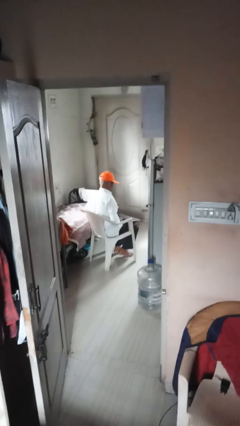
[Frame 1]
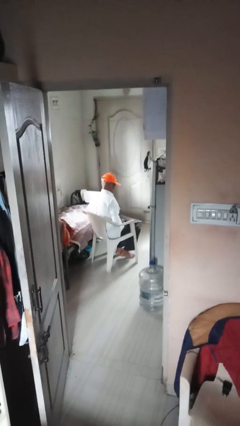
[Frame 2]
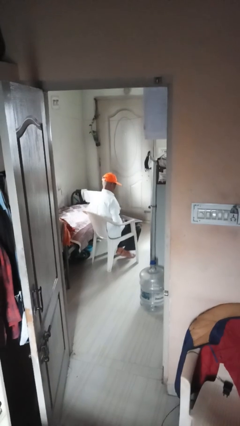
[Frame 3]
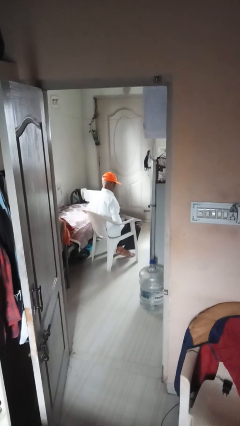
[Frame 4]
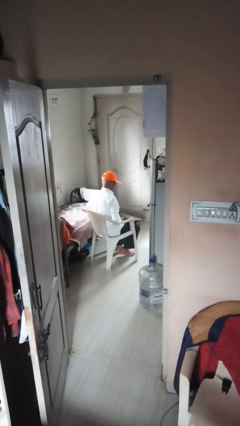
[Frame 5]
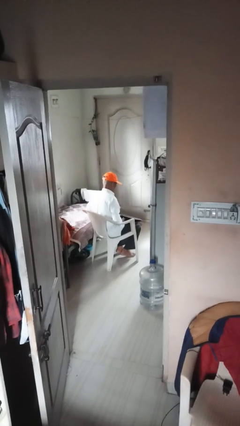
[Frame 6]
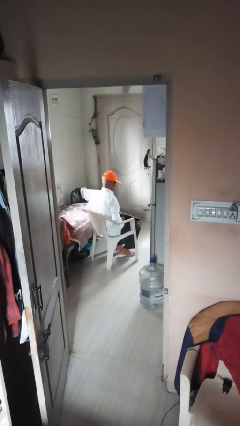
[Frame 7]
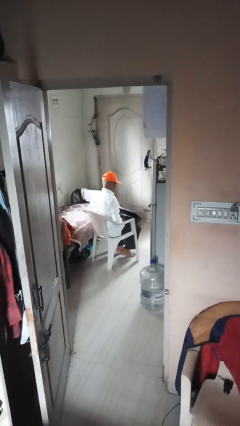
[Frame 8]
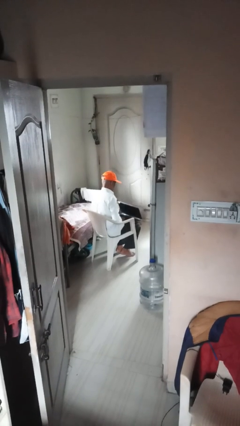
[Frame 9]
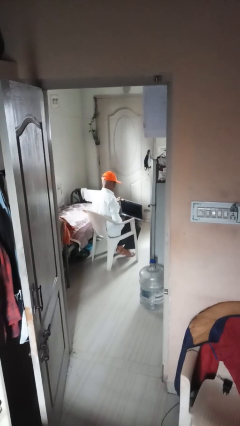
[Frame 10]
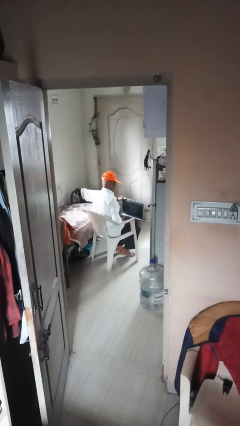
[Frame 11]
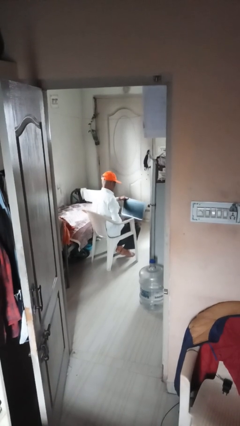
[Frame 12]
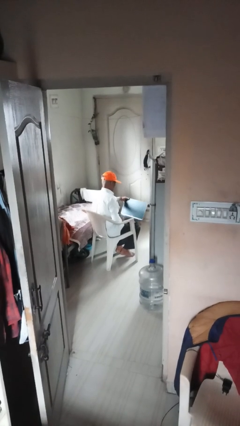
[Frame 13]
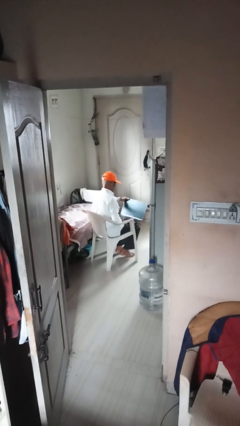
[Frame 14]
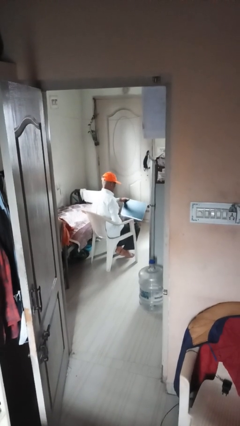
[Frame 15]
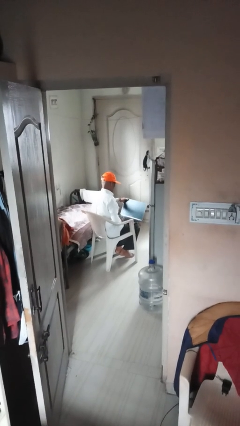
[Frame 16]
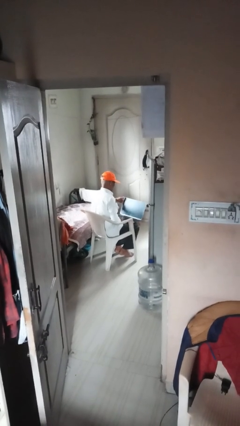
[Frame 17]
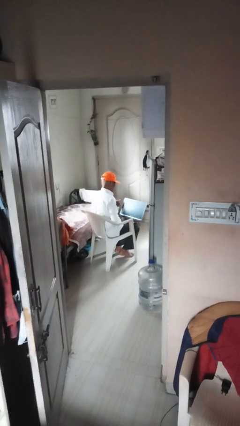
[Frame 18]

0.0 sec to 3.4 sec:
person opens laptop

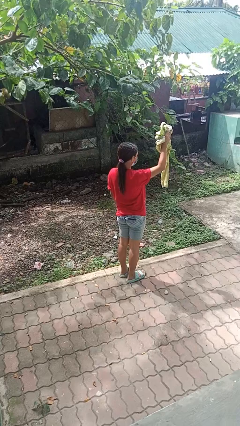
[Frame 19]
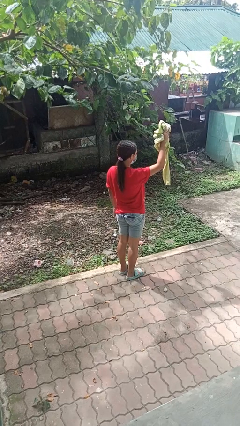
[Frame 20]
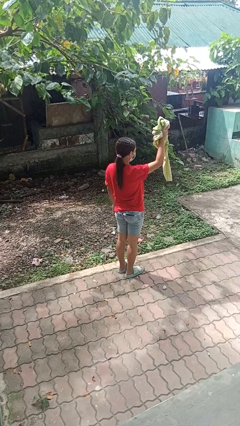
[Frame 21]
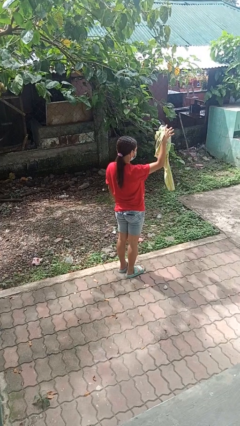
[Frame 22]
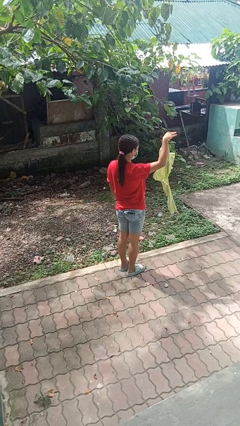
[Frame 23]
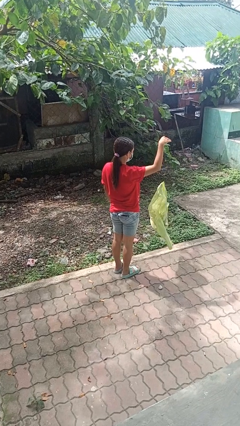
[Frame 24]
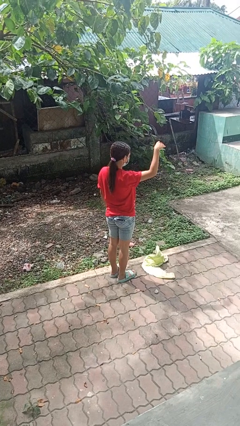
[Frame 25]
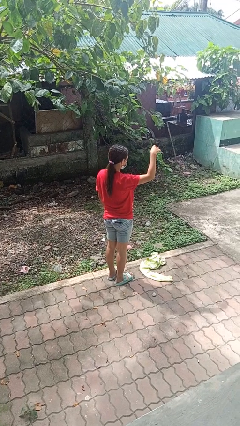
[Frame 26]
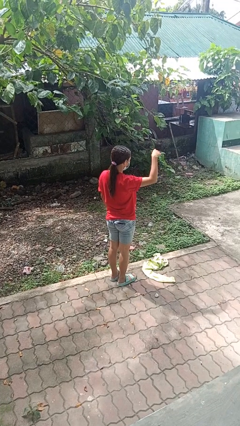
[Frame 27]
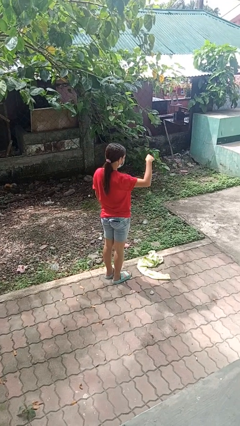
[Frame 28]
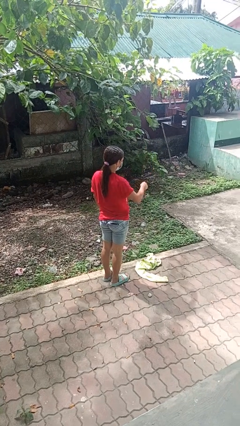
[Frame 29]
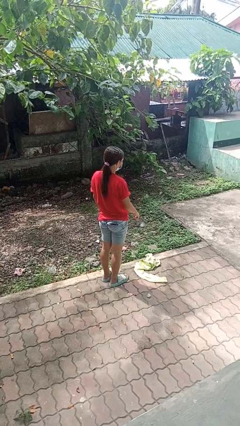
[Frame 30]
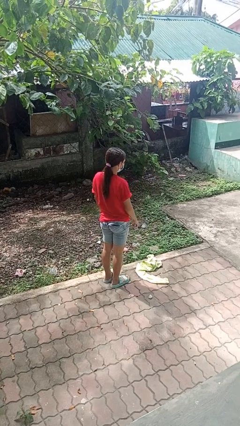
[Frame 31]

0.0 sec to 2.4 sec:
person drops object

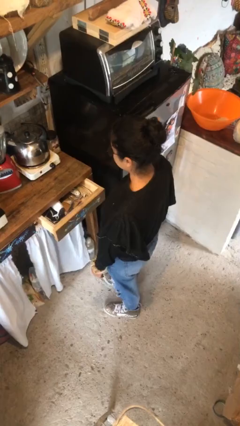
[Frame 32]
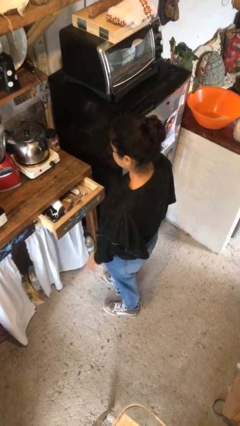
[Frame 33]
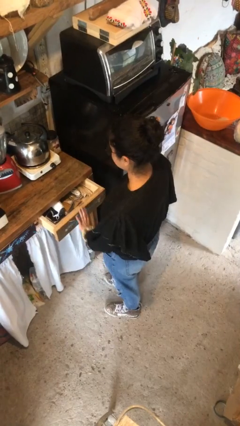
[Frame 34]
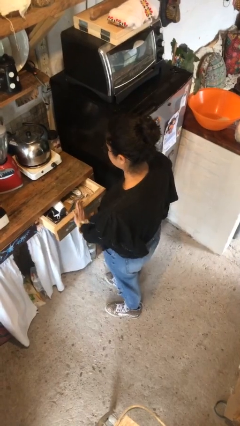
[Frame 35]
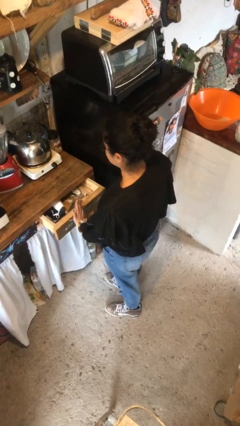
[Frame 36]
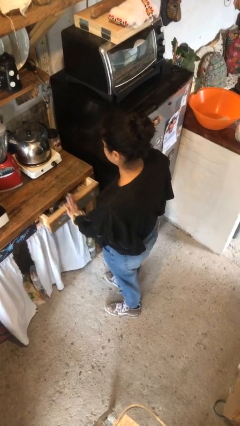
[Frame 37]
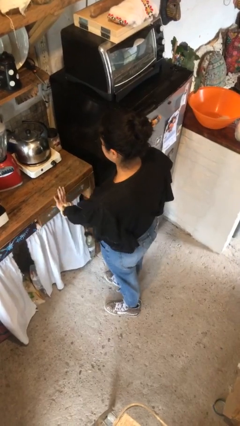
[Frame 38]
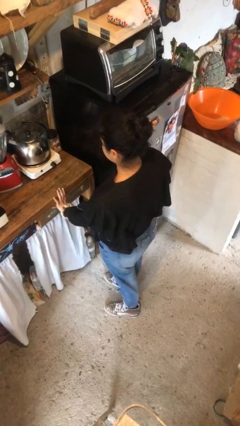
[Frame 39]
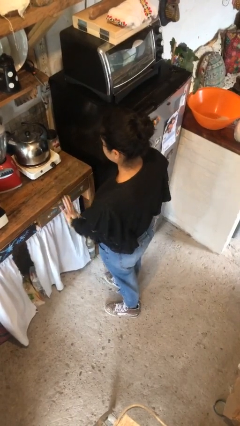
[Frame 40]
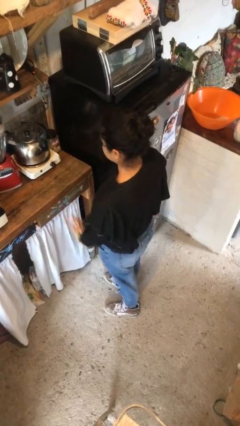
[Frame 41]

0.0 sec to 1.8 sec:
person closes kitchen drawer

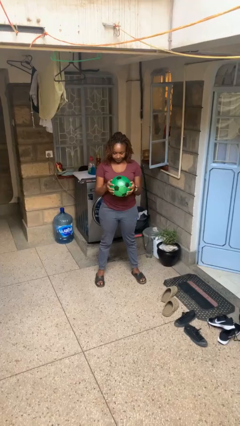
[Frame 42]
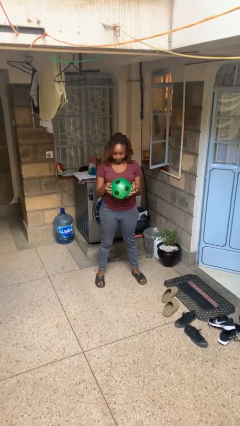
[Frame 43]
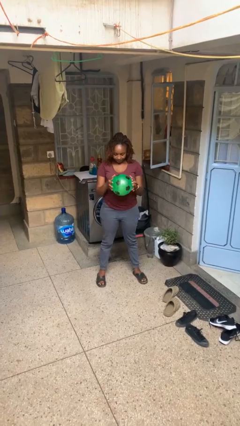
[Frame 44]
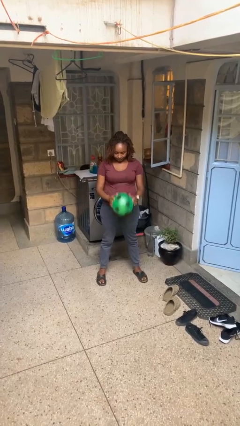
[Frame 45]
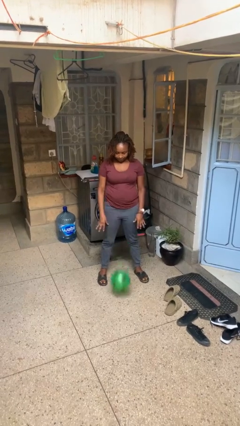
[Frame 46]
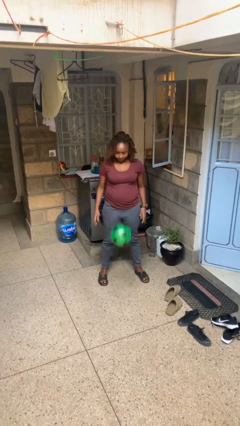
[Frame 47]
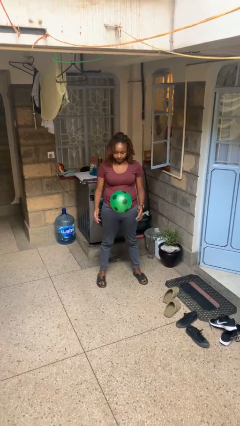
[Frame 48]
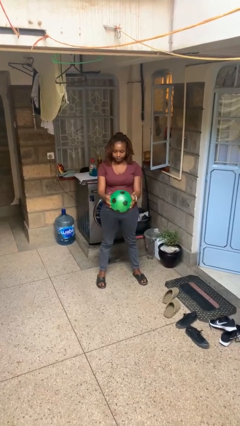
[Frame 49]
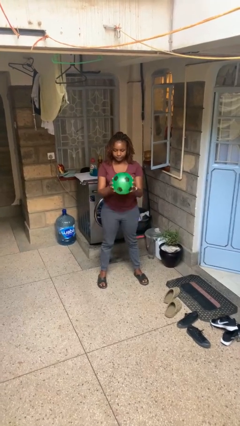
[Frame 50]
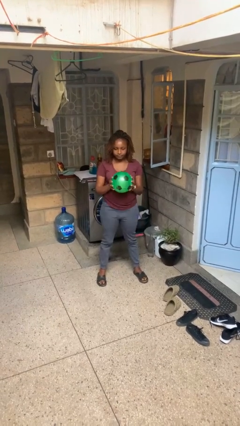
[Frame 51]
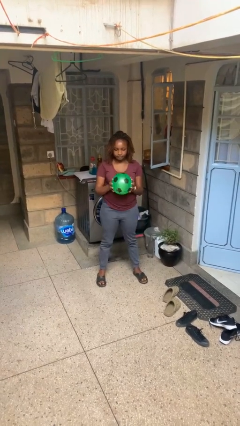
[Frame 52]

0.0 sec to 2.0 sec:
person bounces ball on floor

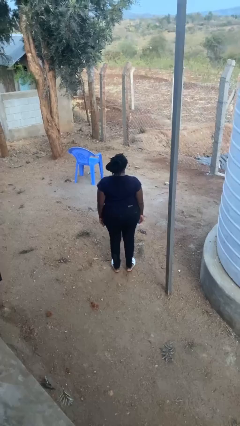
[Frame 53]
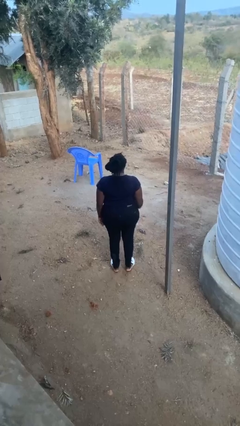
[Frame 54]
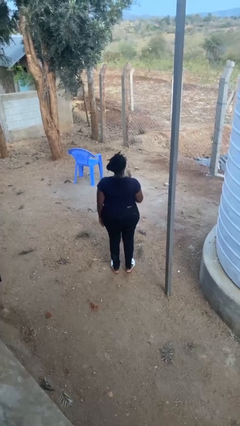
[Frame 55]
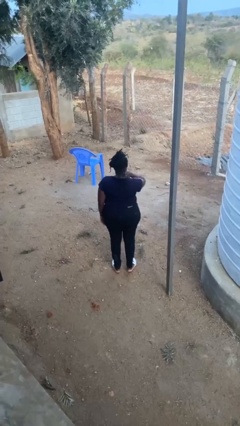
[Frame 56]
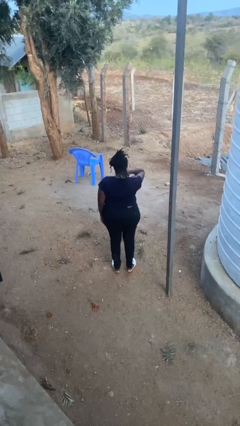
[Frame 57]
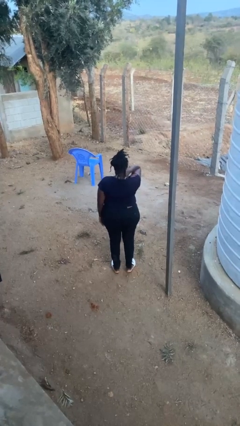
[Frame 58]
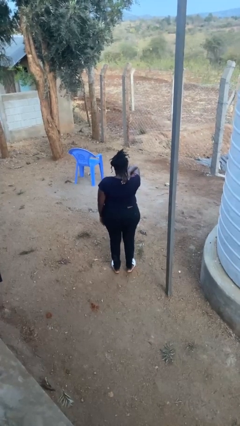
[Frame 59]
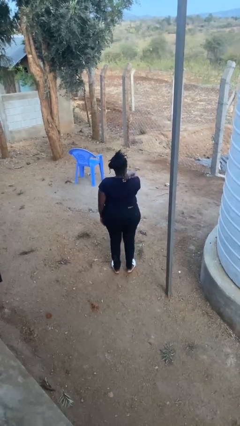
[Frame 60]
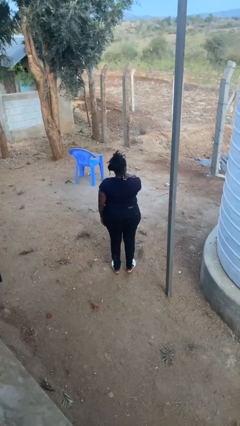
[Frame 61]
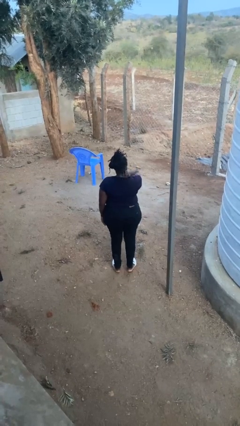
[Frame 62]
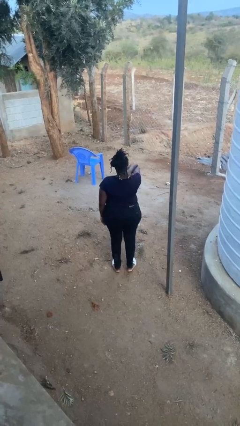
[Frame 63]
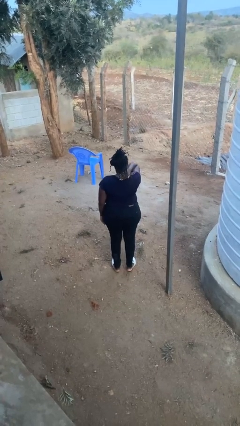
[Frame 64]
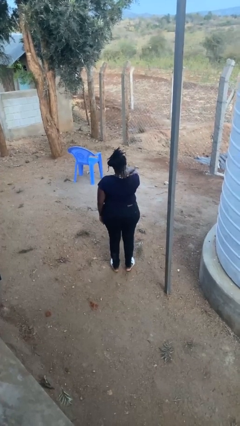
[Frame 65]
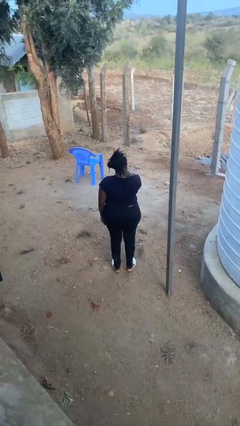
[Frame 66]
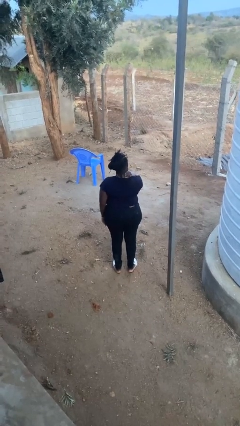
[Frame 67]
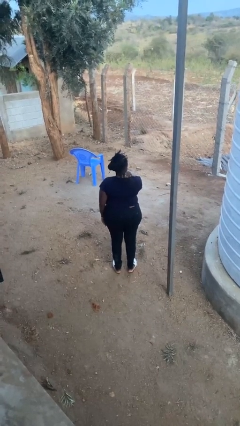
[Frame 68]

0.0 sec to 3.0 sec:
person rubs neck

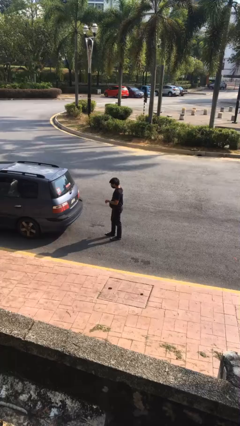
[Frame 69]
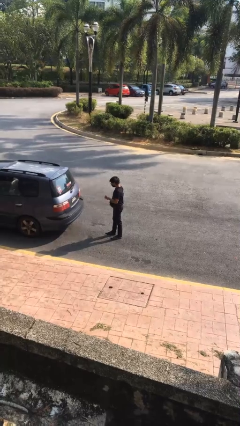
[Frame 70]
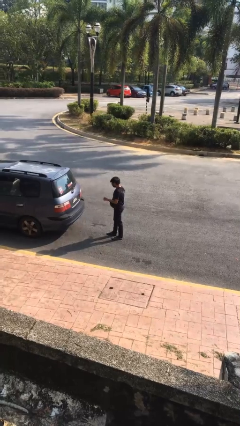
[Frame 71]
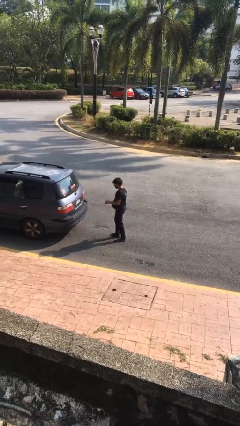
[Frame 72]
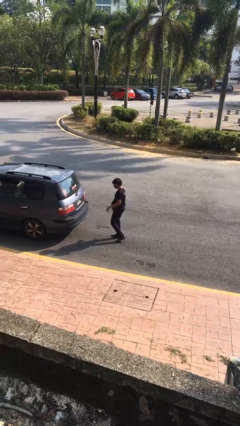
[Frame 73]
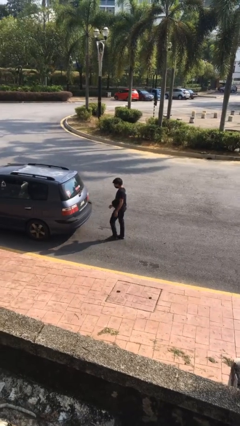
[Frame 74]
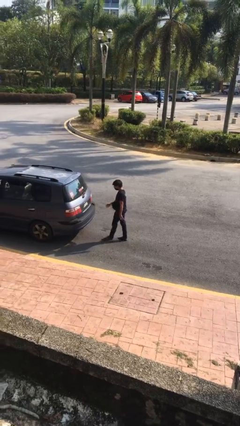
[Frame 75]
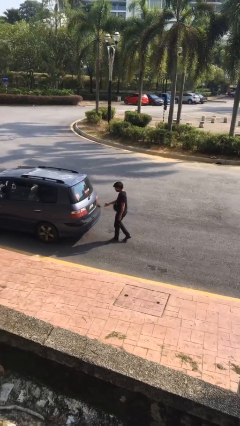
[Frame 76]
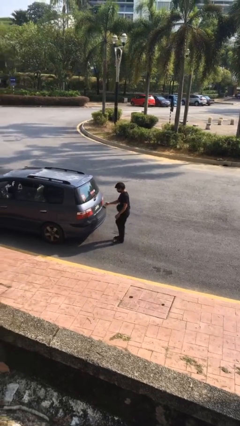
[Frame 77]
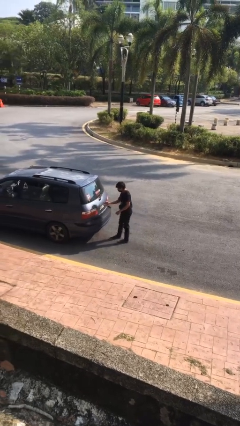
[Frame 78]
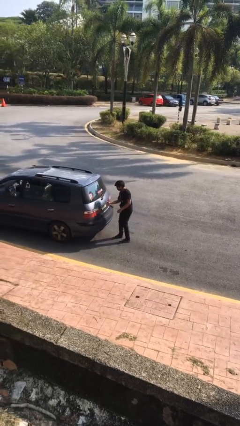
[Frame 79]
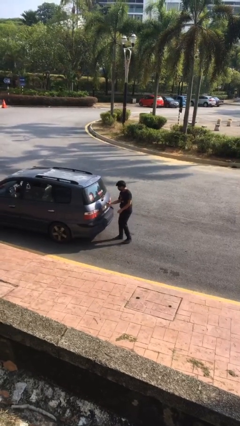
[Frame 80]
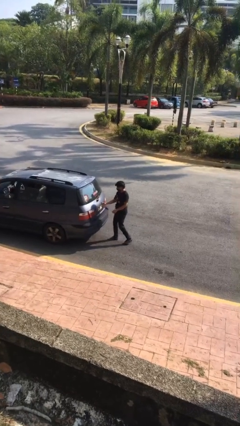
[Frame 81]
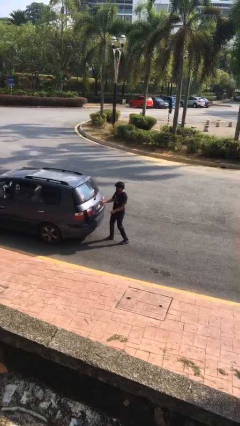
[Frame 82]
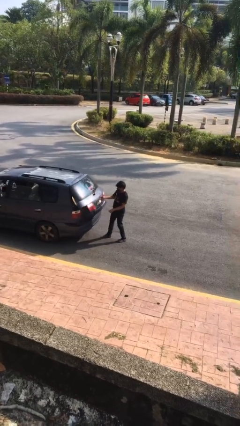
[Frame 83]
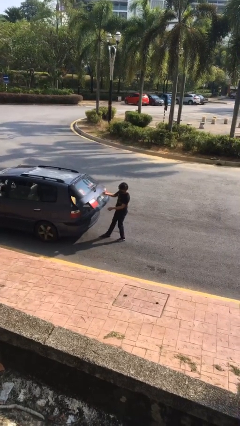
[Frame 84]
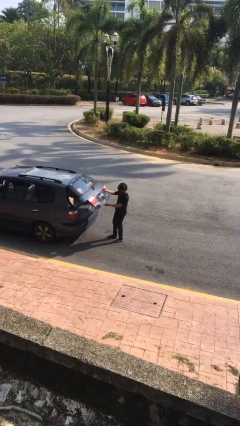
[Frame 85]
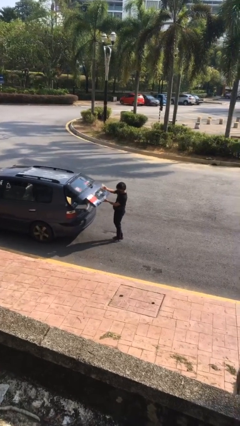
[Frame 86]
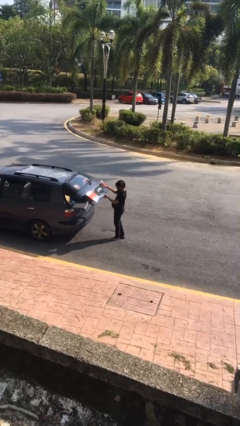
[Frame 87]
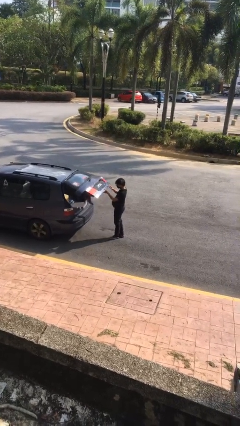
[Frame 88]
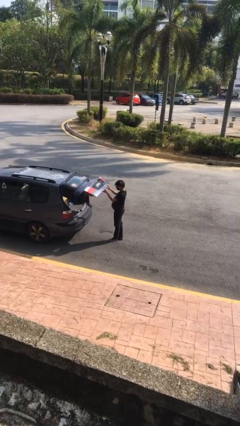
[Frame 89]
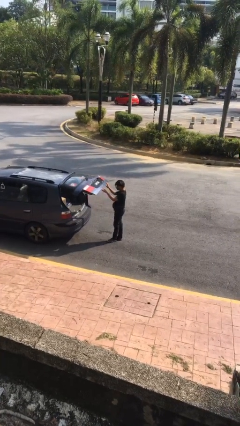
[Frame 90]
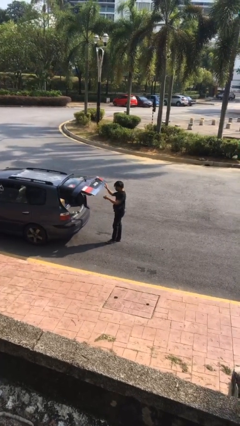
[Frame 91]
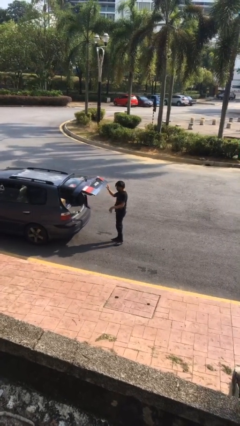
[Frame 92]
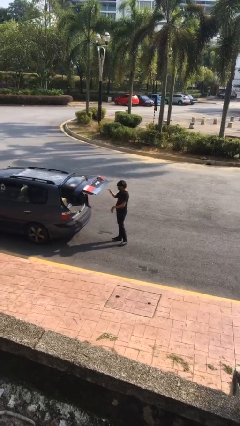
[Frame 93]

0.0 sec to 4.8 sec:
person opens car trunk
